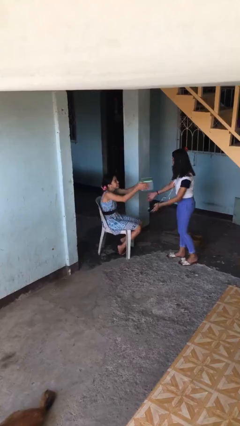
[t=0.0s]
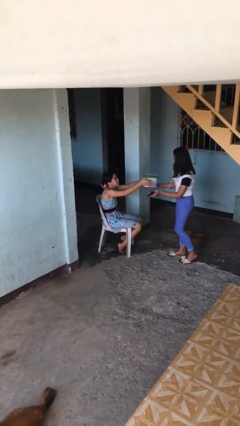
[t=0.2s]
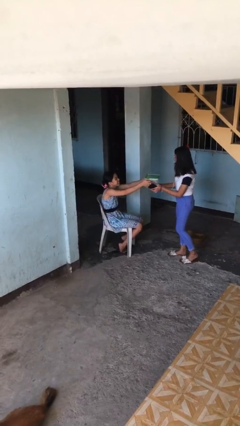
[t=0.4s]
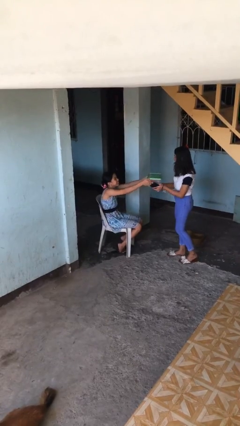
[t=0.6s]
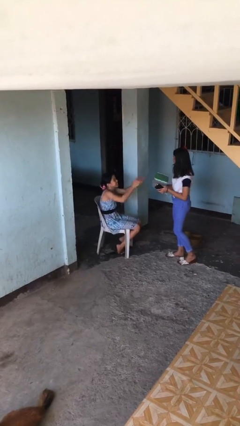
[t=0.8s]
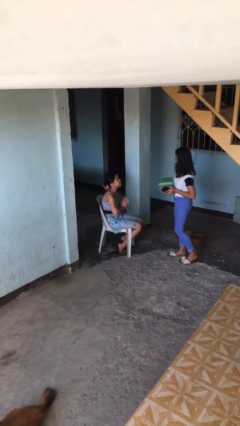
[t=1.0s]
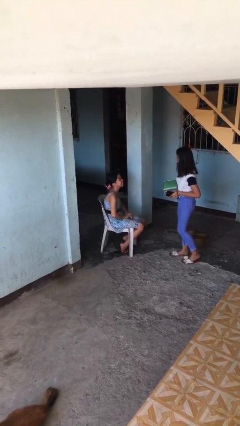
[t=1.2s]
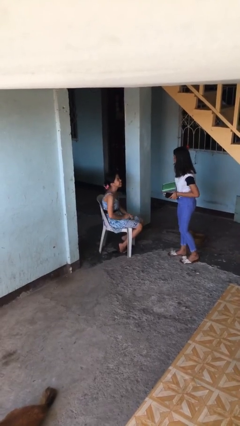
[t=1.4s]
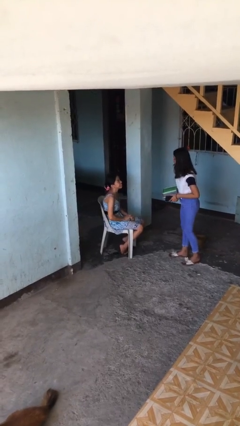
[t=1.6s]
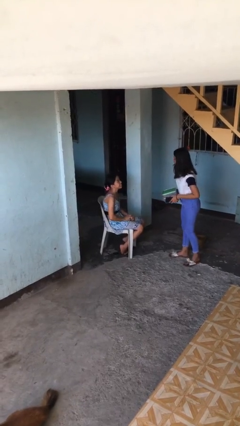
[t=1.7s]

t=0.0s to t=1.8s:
person transfers object to person

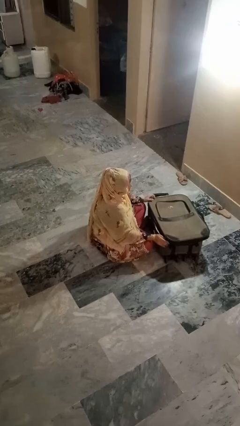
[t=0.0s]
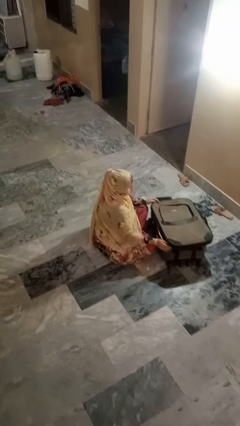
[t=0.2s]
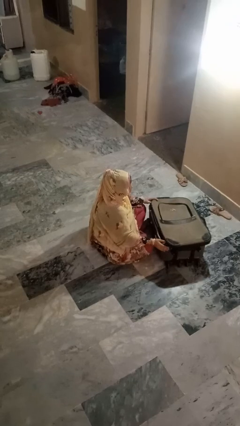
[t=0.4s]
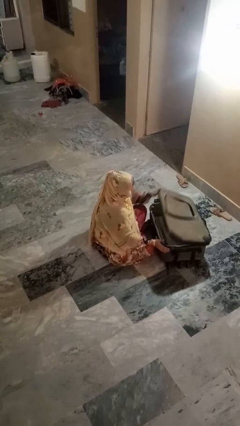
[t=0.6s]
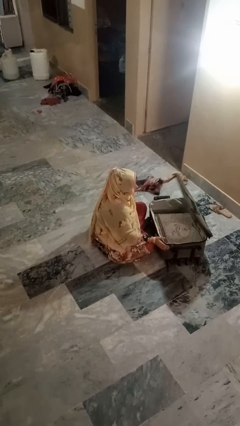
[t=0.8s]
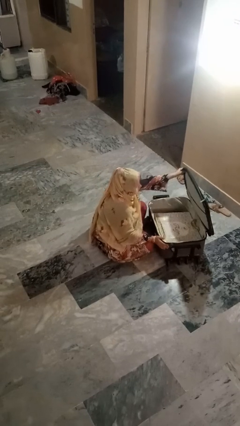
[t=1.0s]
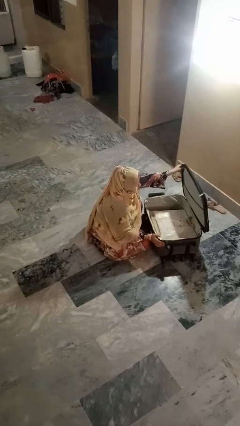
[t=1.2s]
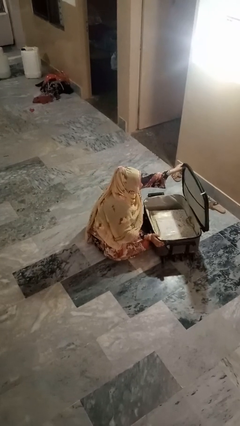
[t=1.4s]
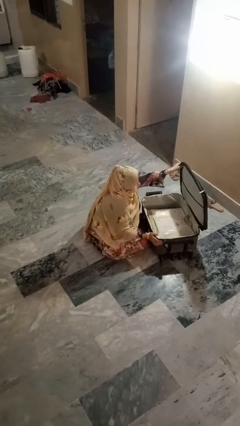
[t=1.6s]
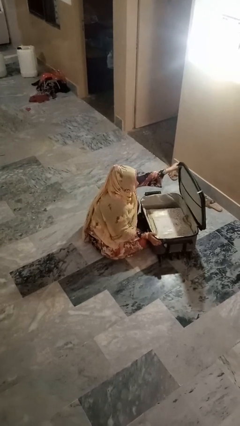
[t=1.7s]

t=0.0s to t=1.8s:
person opens suitcase

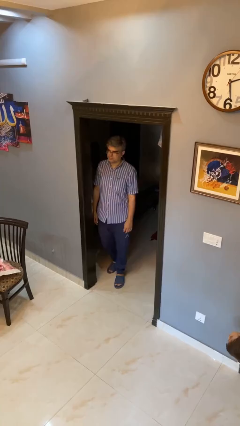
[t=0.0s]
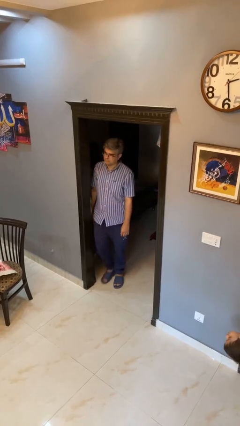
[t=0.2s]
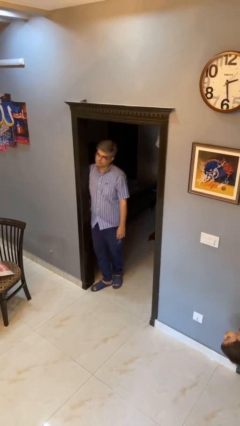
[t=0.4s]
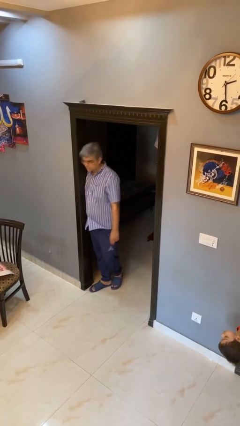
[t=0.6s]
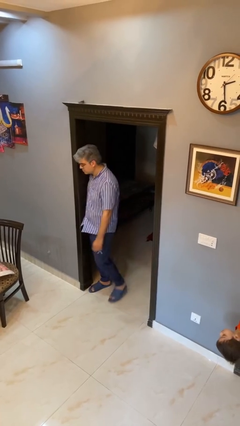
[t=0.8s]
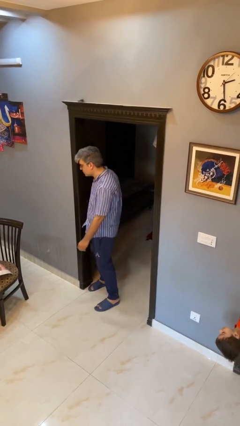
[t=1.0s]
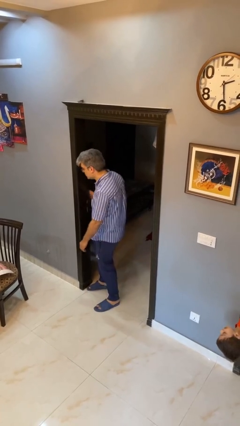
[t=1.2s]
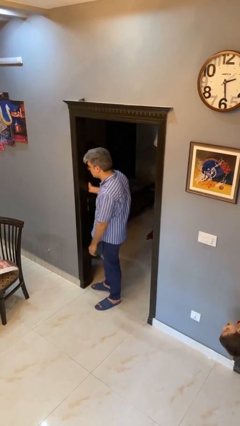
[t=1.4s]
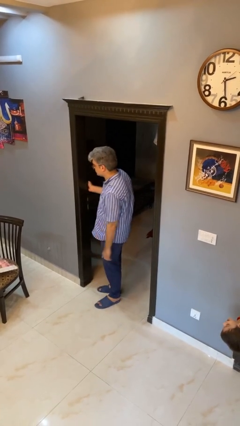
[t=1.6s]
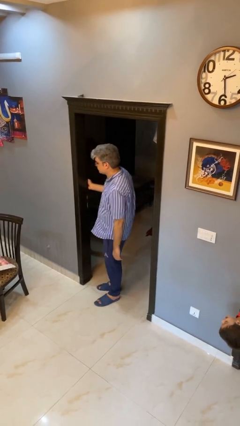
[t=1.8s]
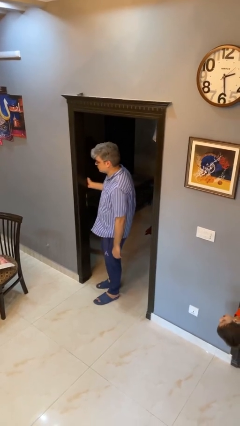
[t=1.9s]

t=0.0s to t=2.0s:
person bumps into wall

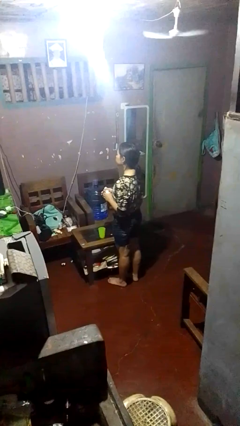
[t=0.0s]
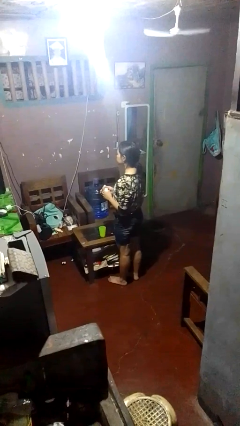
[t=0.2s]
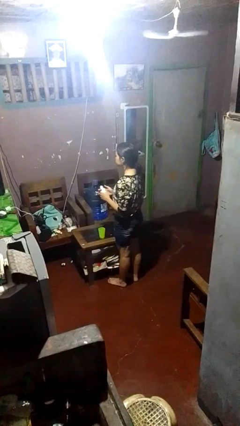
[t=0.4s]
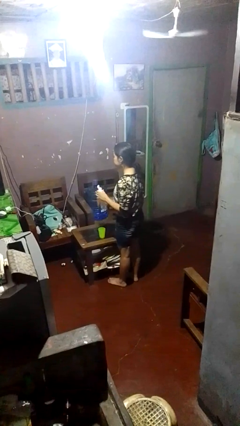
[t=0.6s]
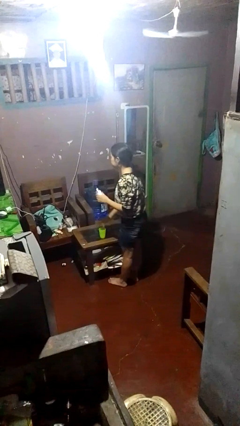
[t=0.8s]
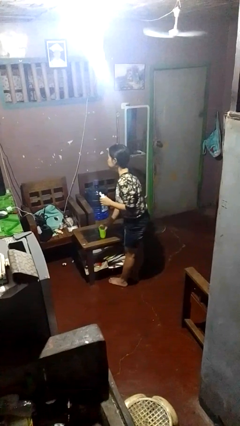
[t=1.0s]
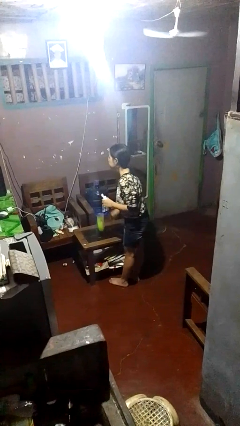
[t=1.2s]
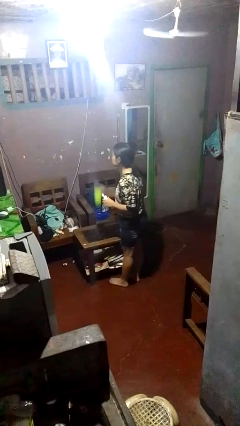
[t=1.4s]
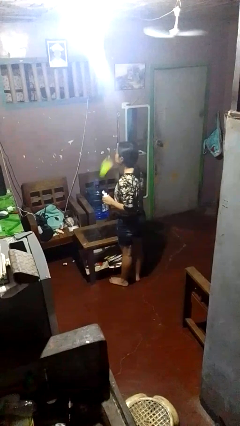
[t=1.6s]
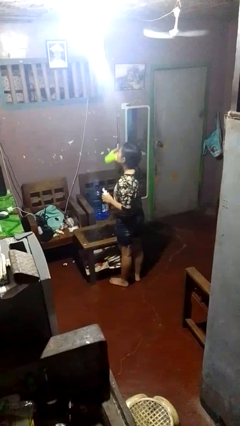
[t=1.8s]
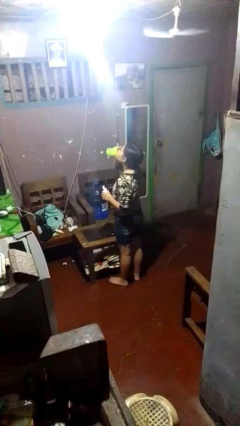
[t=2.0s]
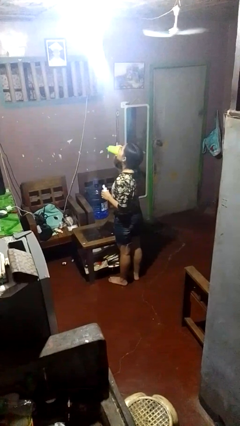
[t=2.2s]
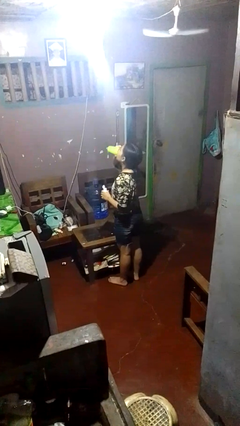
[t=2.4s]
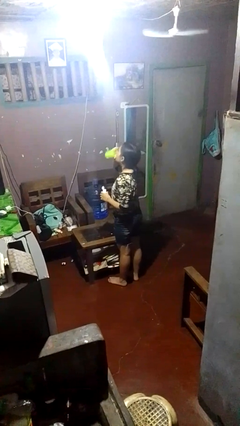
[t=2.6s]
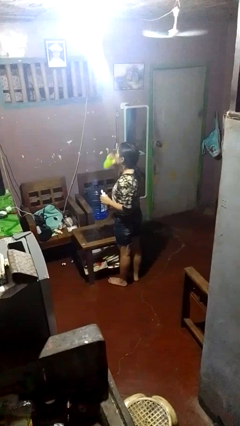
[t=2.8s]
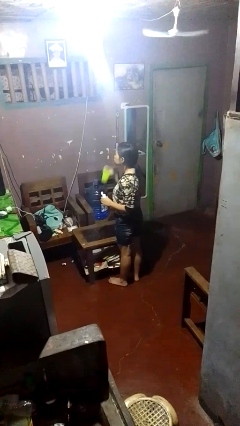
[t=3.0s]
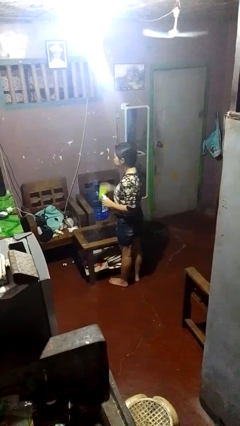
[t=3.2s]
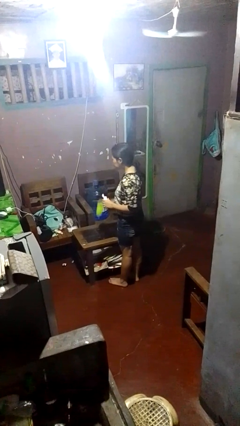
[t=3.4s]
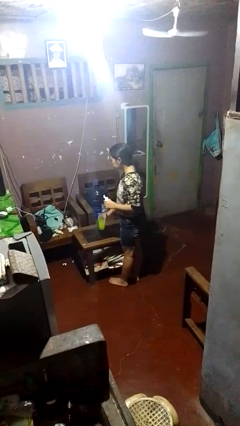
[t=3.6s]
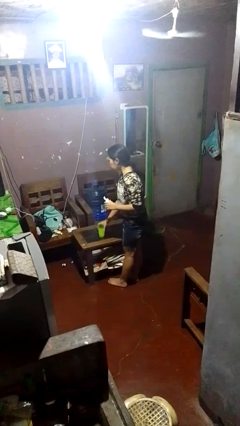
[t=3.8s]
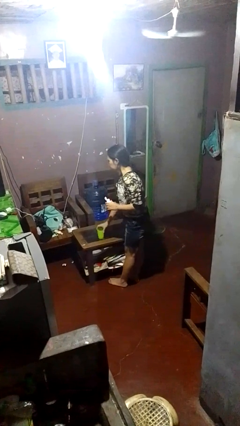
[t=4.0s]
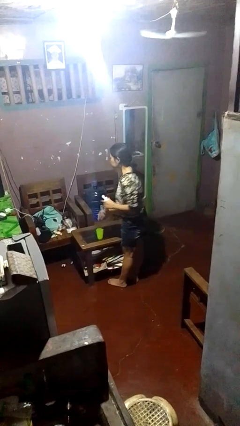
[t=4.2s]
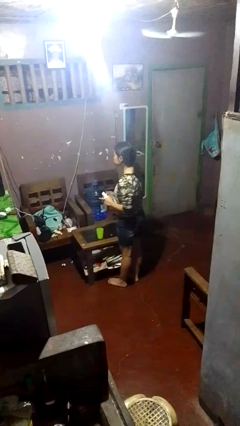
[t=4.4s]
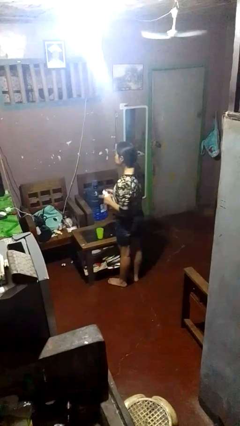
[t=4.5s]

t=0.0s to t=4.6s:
person drinks from cup

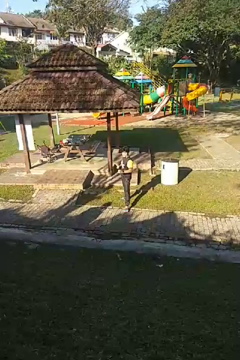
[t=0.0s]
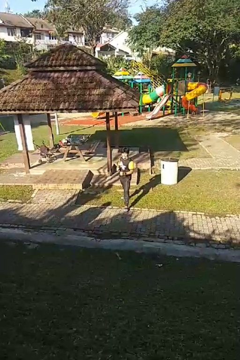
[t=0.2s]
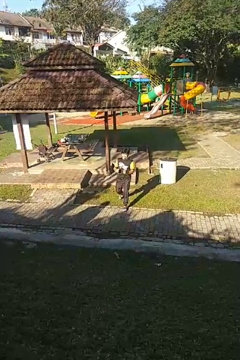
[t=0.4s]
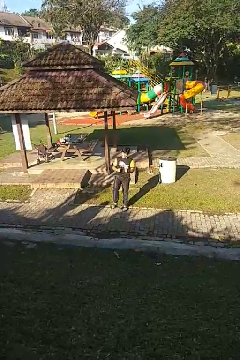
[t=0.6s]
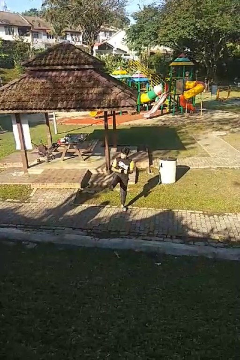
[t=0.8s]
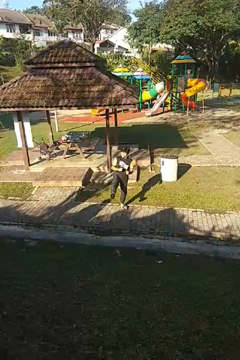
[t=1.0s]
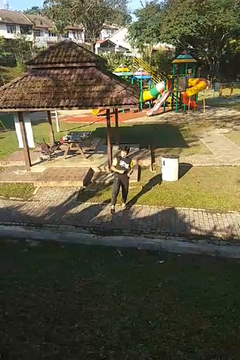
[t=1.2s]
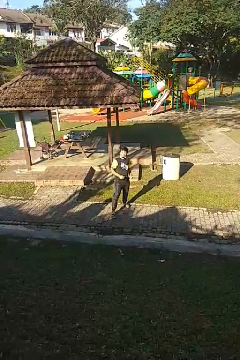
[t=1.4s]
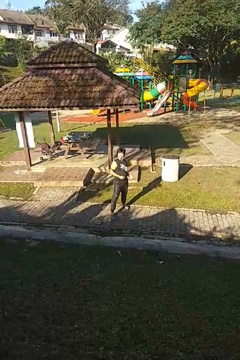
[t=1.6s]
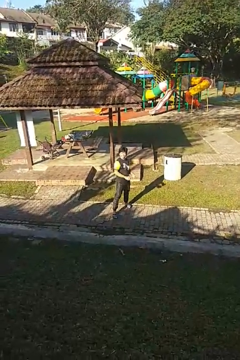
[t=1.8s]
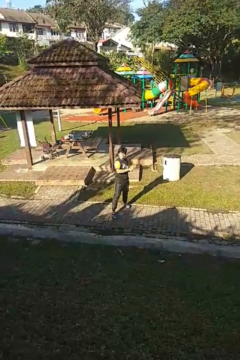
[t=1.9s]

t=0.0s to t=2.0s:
person karate kicks

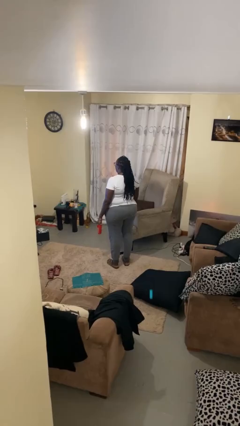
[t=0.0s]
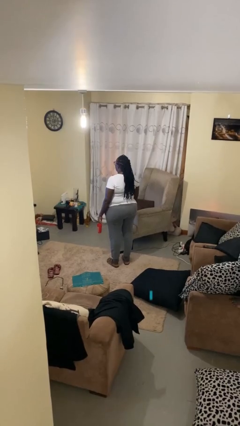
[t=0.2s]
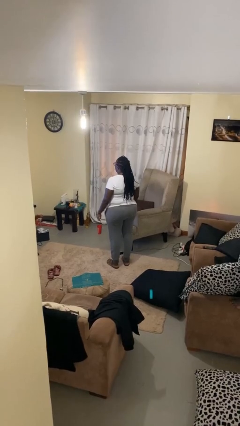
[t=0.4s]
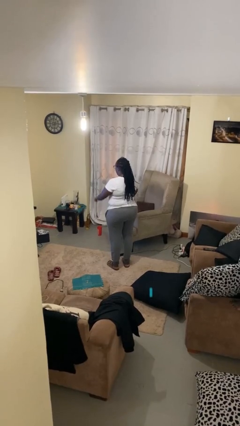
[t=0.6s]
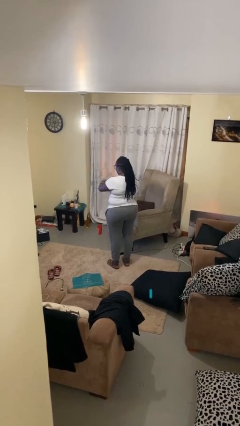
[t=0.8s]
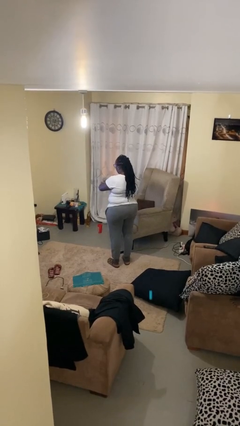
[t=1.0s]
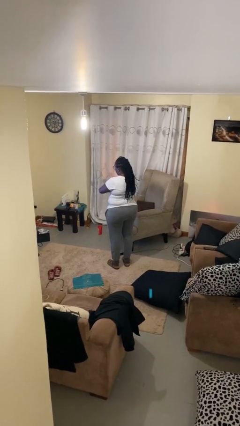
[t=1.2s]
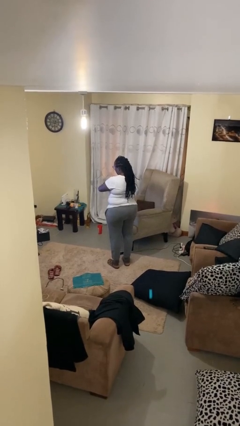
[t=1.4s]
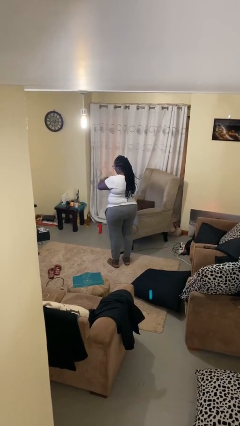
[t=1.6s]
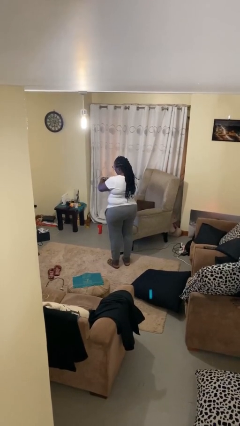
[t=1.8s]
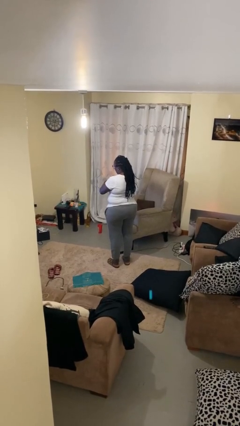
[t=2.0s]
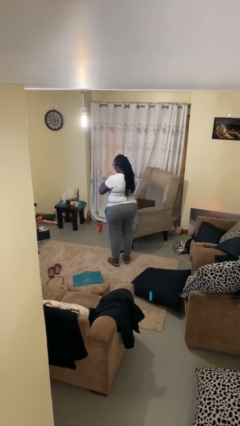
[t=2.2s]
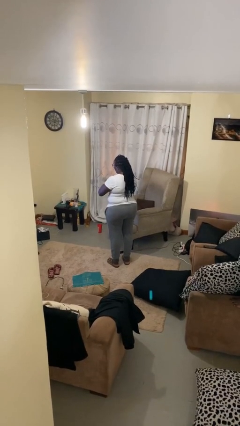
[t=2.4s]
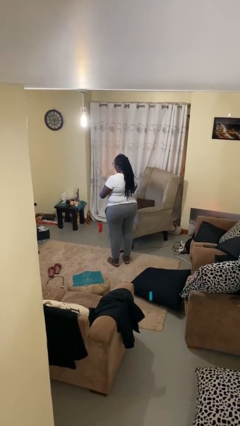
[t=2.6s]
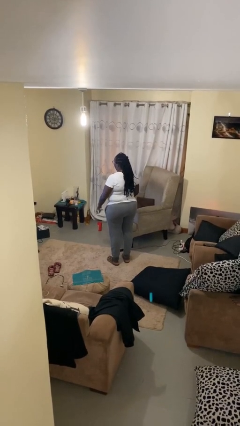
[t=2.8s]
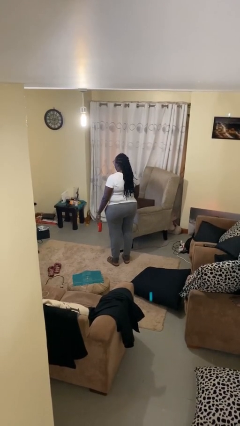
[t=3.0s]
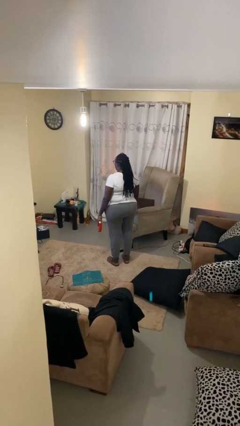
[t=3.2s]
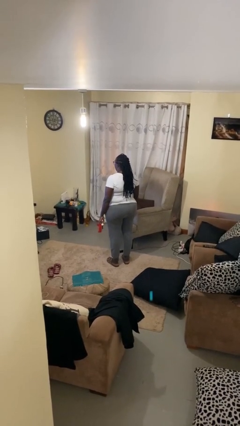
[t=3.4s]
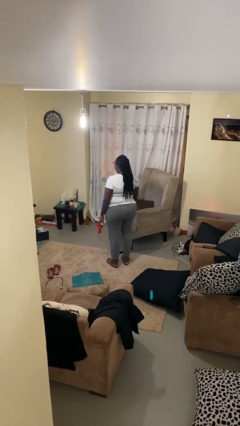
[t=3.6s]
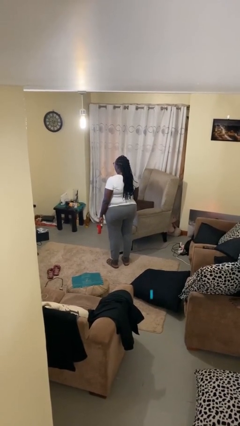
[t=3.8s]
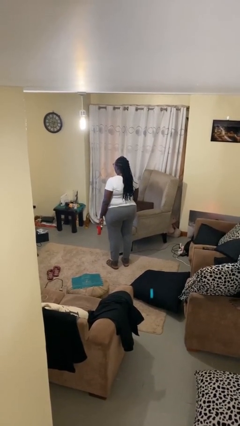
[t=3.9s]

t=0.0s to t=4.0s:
person takes off wristwatch

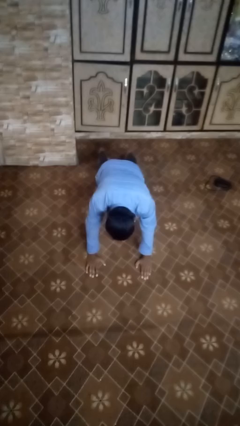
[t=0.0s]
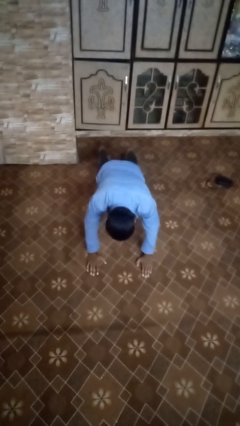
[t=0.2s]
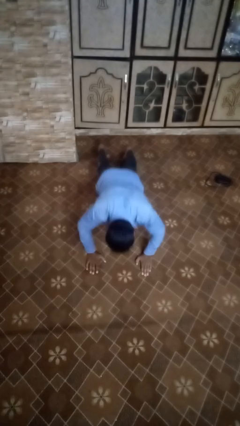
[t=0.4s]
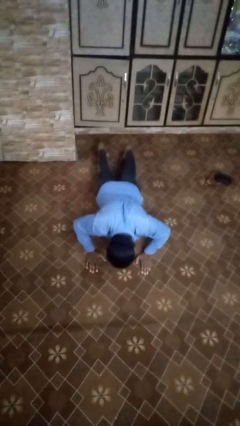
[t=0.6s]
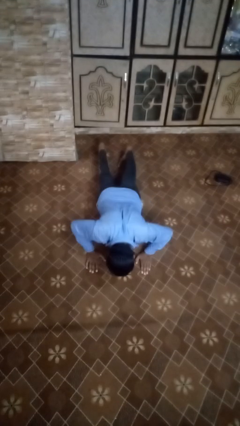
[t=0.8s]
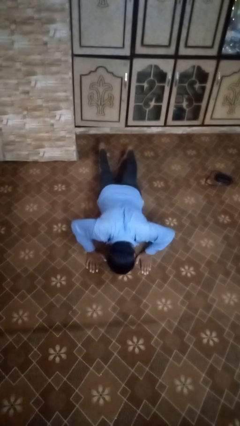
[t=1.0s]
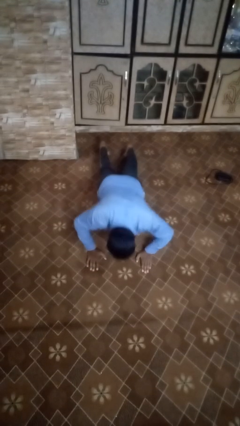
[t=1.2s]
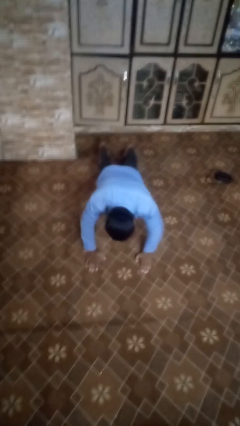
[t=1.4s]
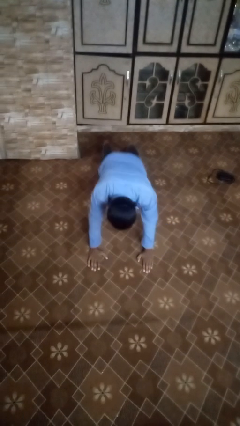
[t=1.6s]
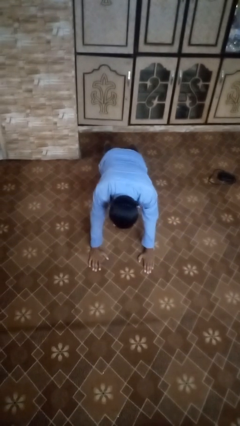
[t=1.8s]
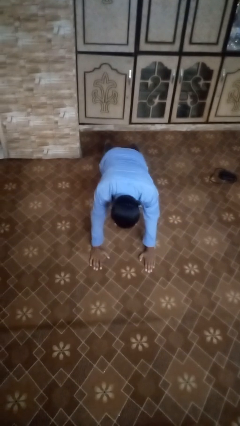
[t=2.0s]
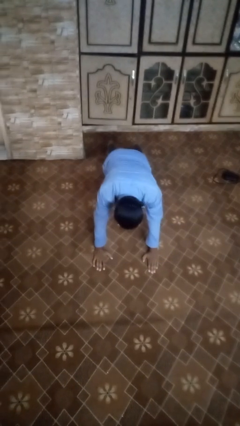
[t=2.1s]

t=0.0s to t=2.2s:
person exercises with pushup
